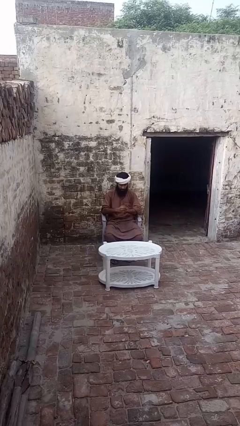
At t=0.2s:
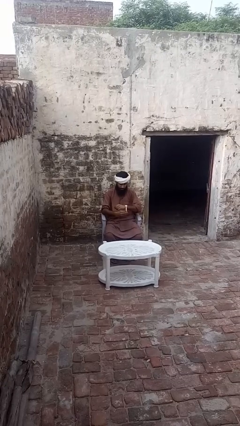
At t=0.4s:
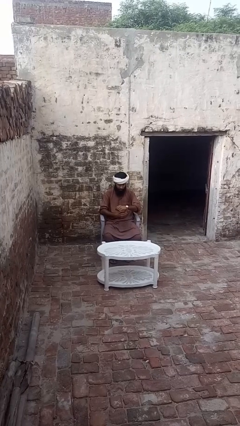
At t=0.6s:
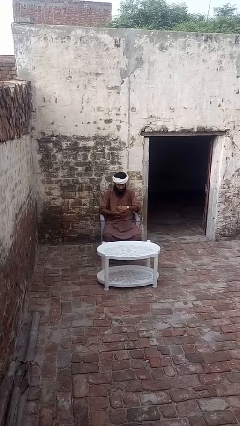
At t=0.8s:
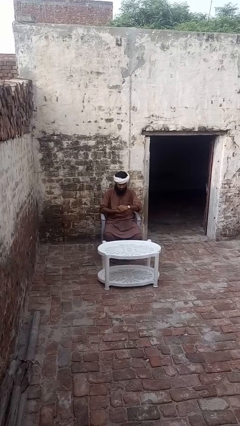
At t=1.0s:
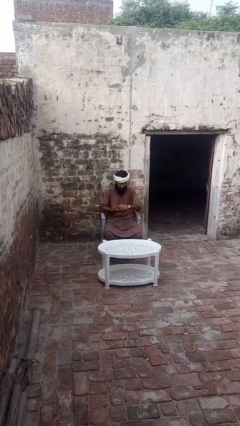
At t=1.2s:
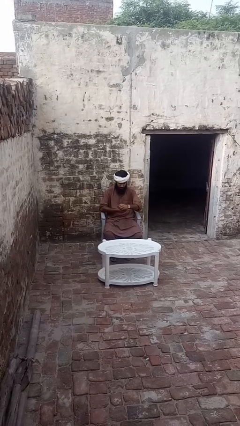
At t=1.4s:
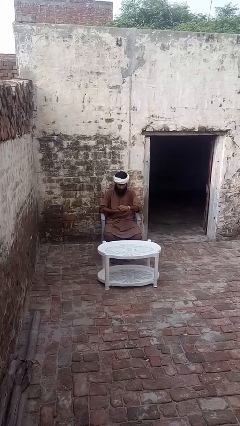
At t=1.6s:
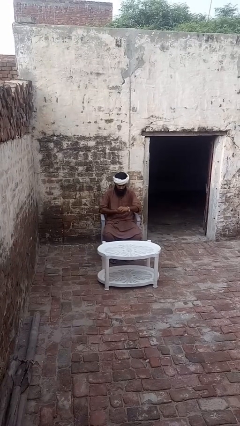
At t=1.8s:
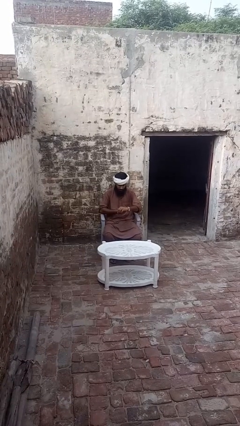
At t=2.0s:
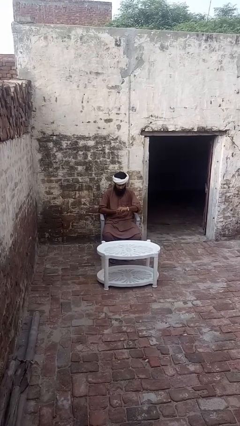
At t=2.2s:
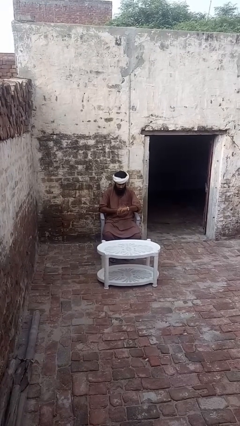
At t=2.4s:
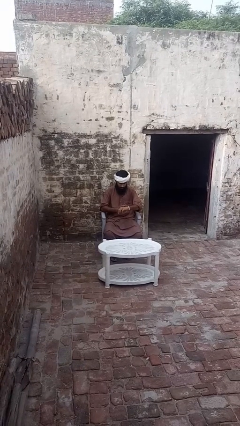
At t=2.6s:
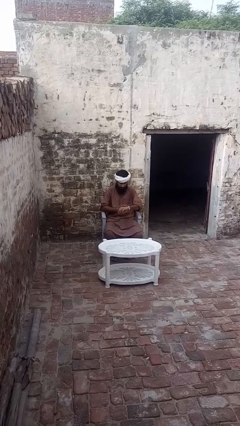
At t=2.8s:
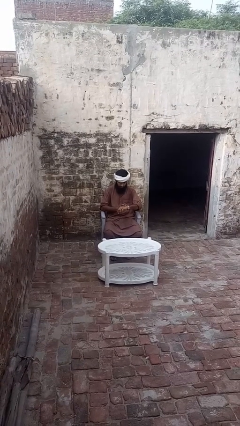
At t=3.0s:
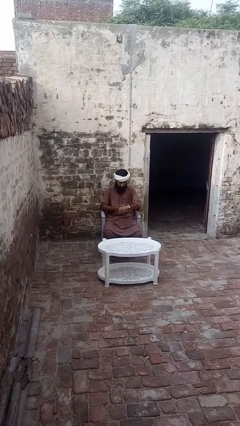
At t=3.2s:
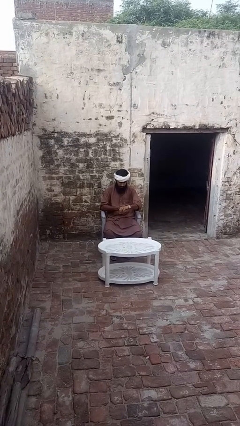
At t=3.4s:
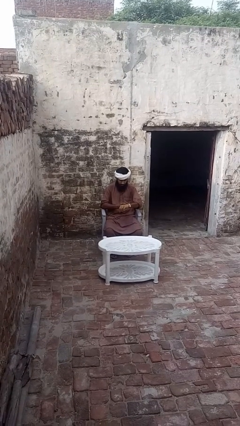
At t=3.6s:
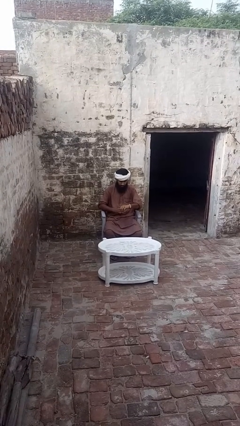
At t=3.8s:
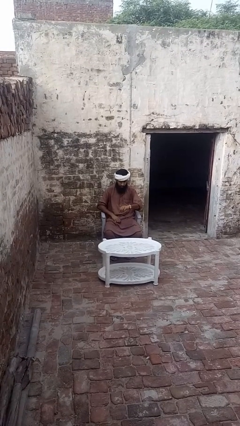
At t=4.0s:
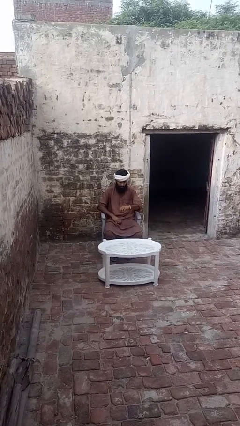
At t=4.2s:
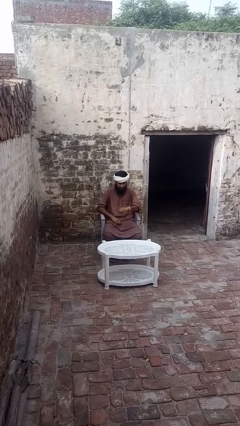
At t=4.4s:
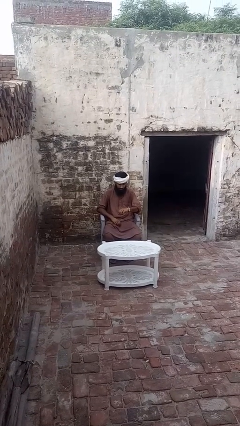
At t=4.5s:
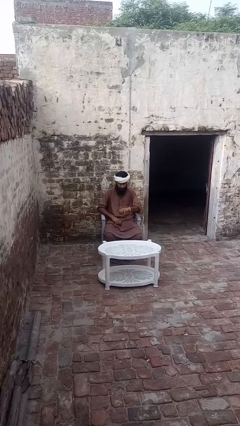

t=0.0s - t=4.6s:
person puts on wristwatch

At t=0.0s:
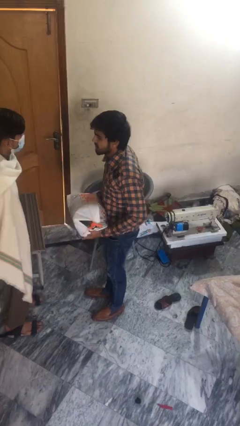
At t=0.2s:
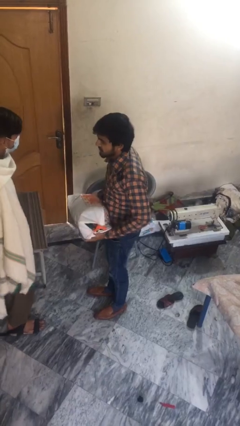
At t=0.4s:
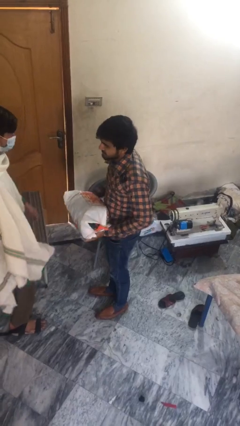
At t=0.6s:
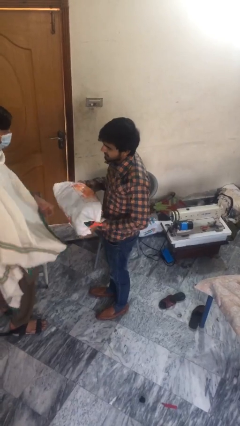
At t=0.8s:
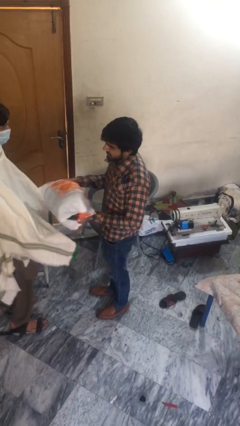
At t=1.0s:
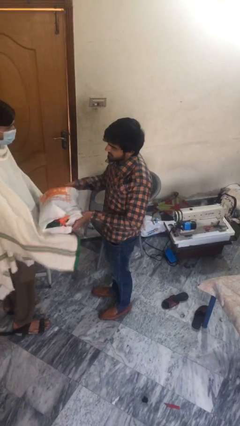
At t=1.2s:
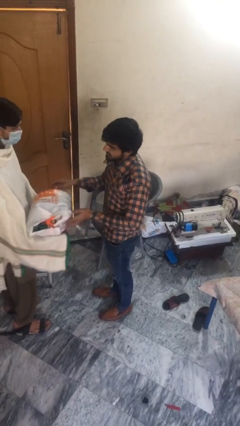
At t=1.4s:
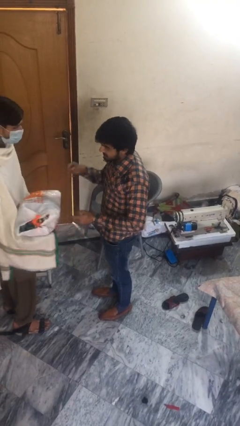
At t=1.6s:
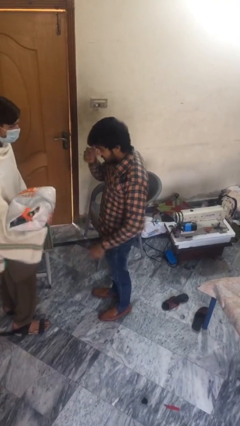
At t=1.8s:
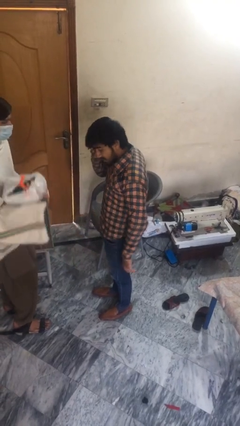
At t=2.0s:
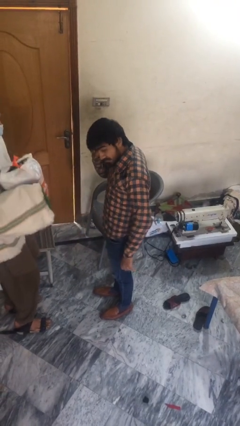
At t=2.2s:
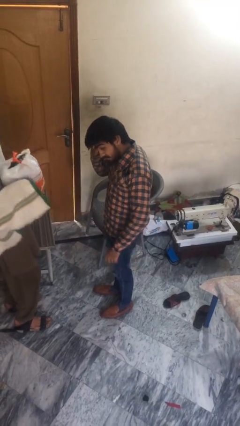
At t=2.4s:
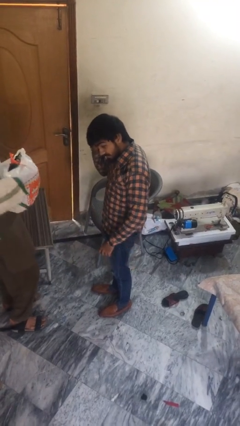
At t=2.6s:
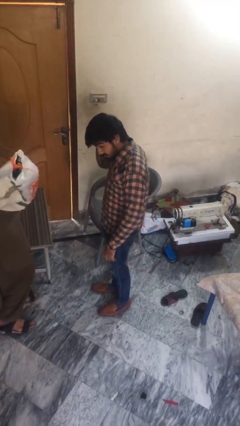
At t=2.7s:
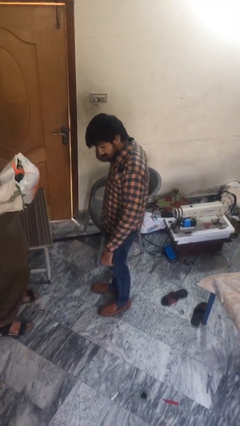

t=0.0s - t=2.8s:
person transfers object to person

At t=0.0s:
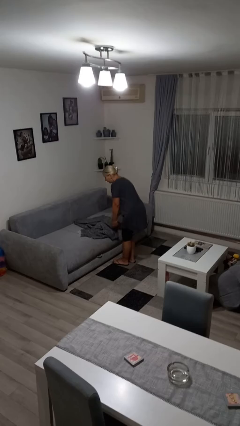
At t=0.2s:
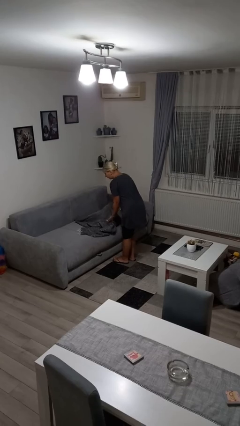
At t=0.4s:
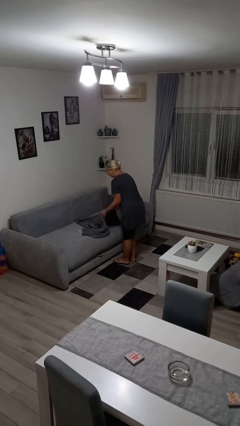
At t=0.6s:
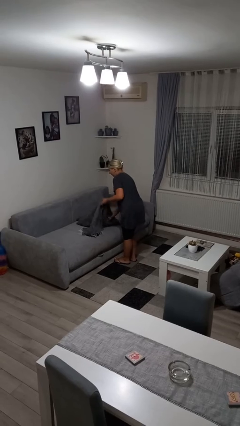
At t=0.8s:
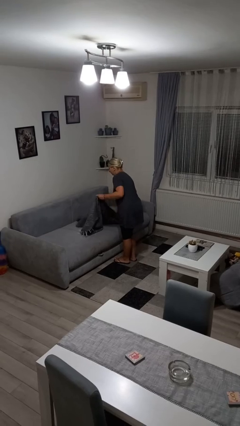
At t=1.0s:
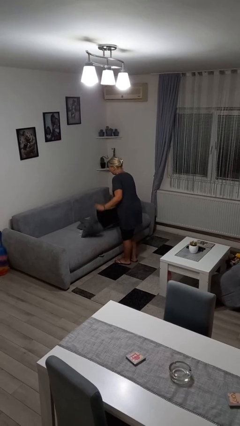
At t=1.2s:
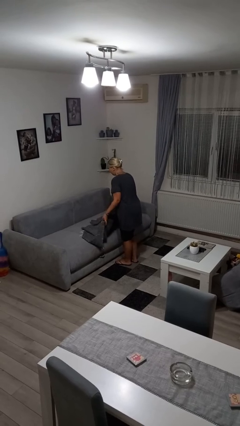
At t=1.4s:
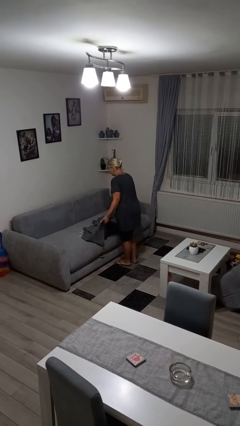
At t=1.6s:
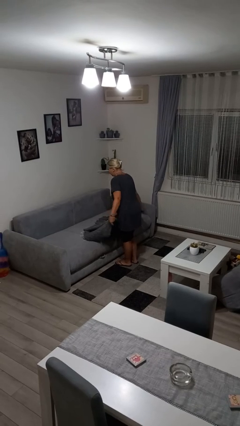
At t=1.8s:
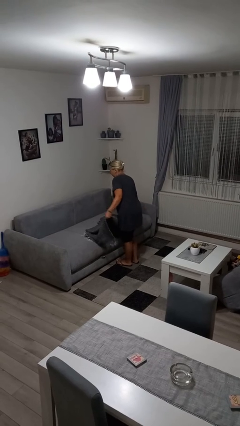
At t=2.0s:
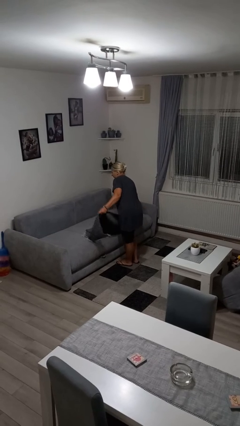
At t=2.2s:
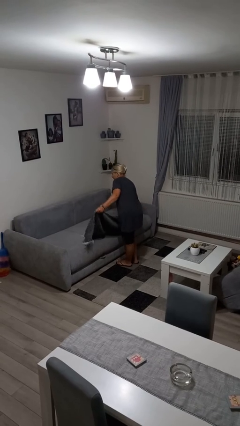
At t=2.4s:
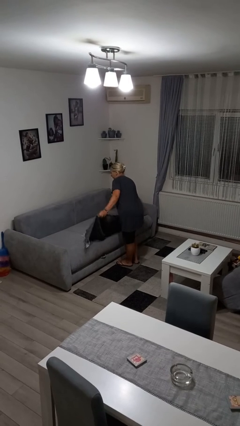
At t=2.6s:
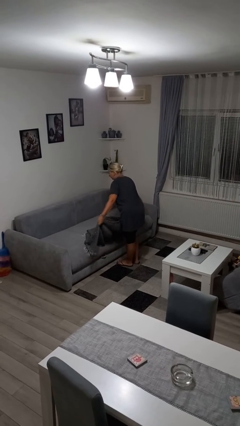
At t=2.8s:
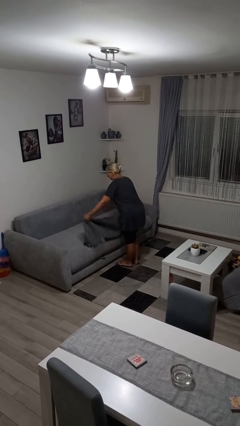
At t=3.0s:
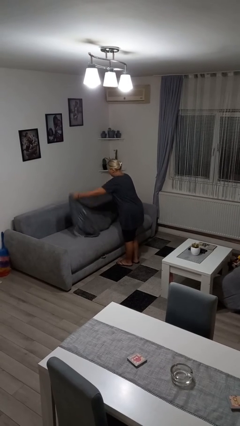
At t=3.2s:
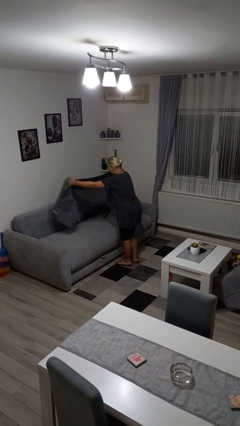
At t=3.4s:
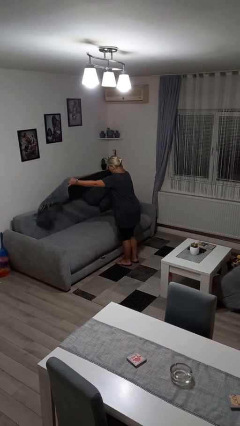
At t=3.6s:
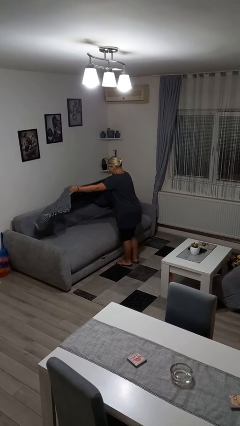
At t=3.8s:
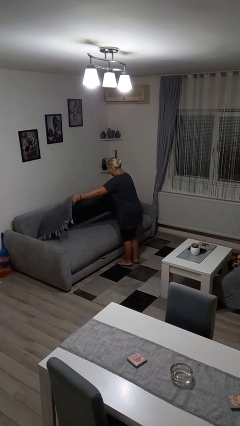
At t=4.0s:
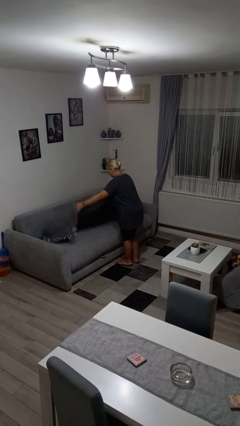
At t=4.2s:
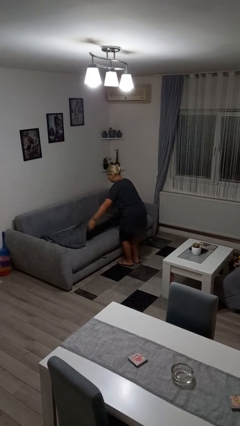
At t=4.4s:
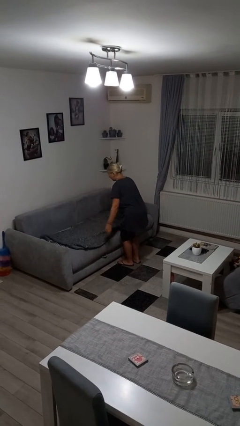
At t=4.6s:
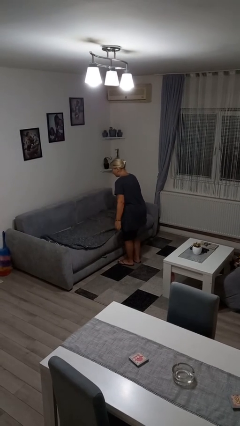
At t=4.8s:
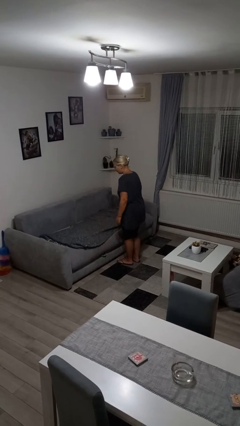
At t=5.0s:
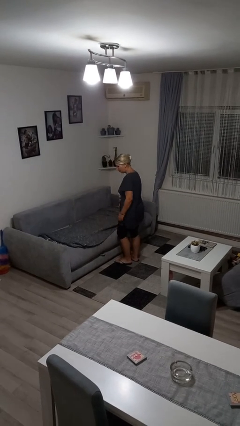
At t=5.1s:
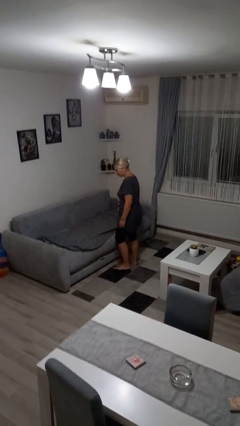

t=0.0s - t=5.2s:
person makes bed

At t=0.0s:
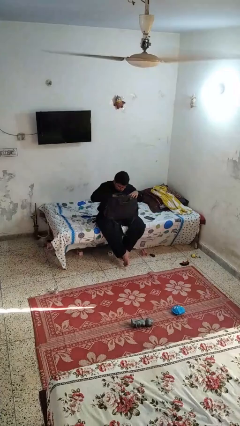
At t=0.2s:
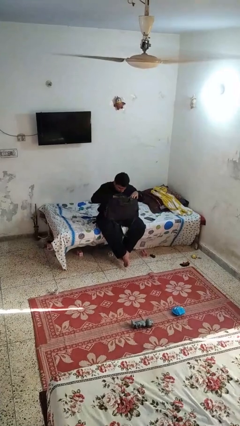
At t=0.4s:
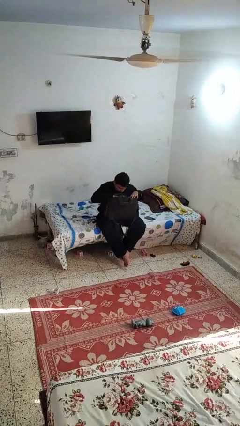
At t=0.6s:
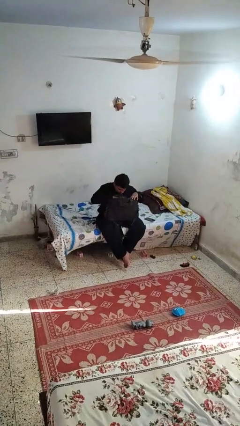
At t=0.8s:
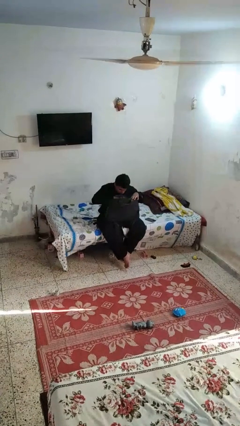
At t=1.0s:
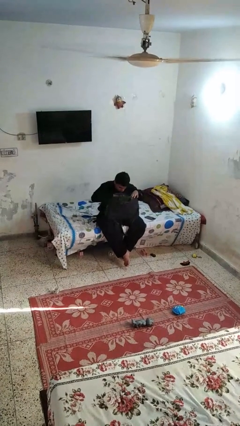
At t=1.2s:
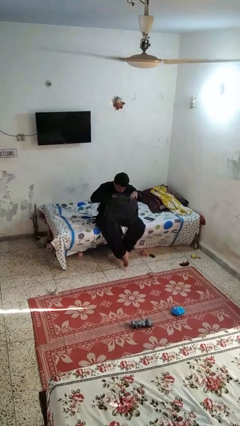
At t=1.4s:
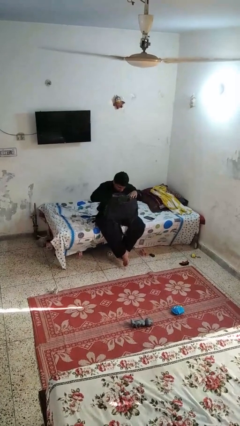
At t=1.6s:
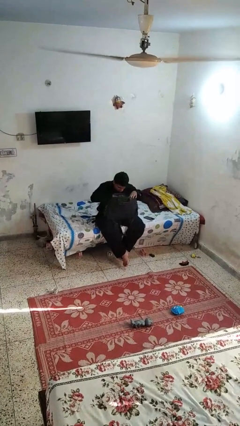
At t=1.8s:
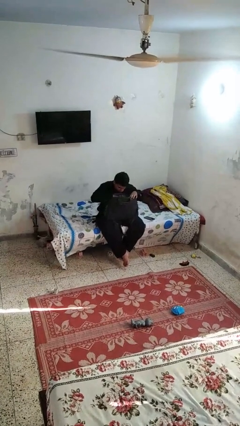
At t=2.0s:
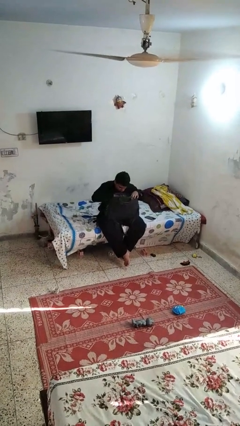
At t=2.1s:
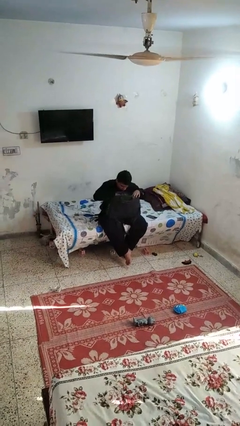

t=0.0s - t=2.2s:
person searches in backpack

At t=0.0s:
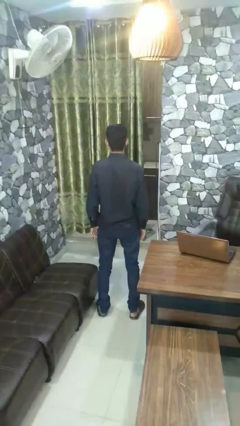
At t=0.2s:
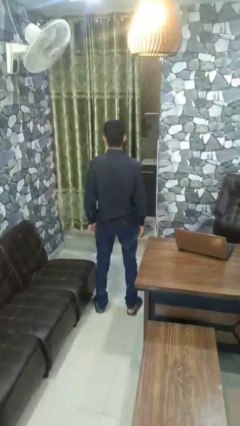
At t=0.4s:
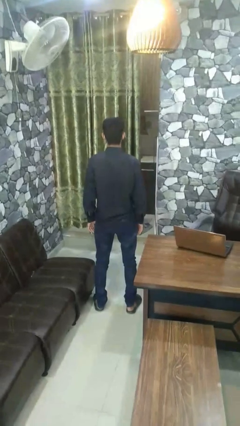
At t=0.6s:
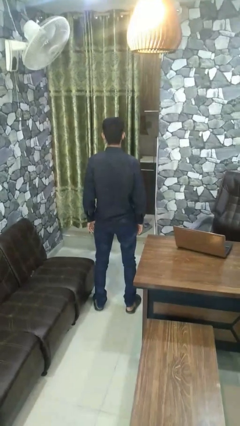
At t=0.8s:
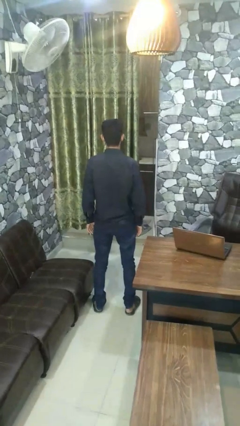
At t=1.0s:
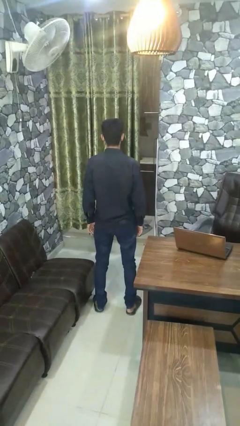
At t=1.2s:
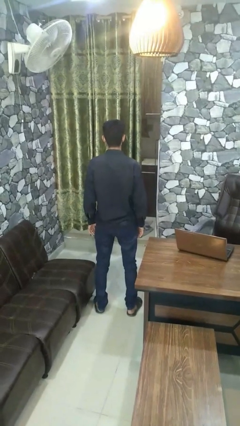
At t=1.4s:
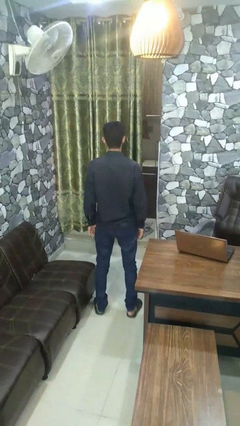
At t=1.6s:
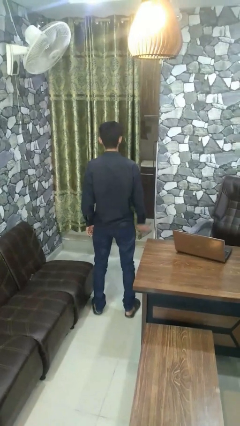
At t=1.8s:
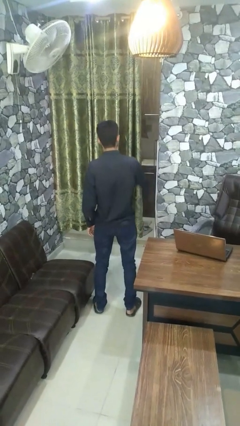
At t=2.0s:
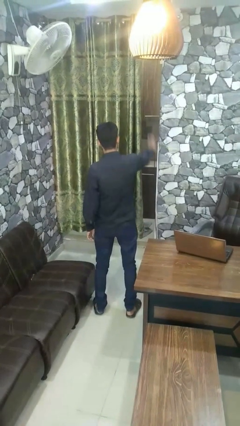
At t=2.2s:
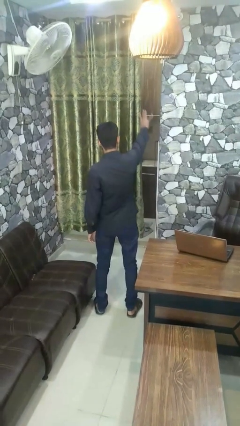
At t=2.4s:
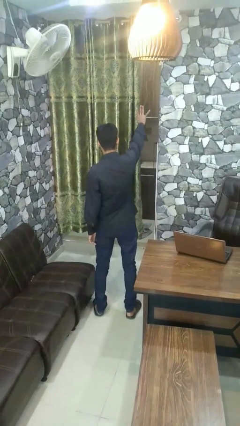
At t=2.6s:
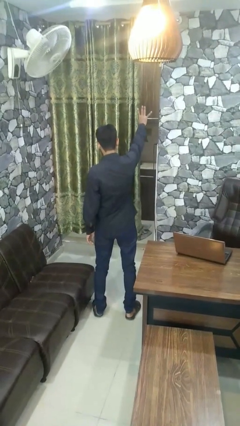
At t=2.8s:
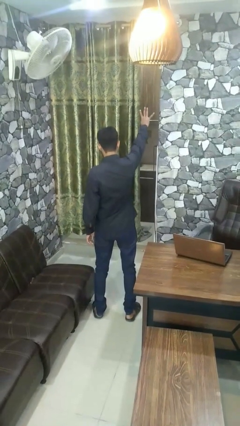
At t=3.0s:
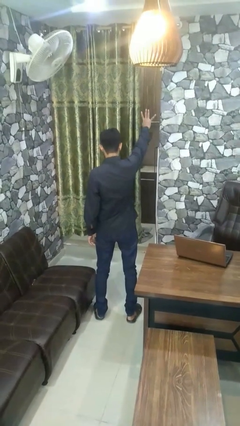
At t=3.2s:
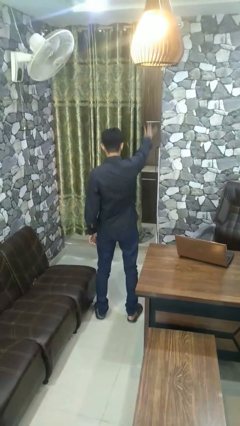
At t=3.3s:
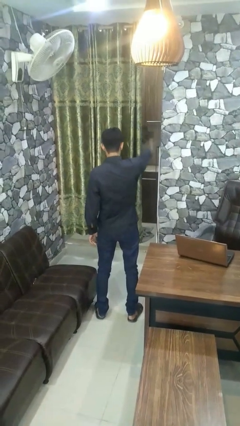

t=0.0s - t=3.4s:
person gestures number four
